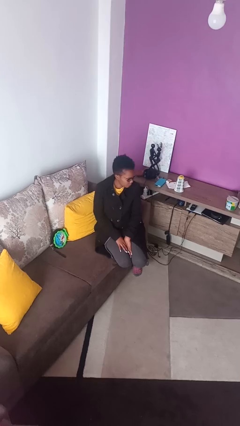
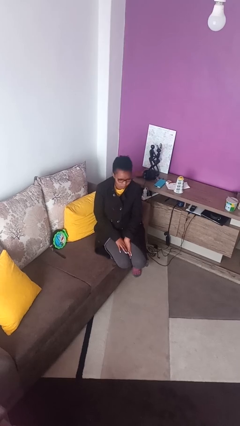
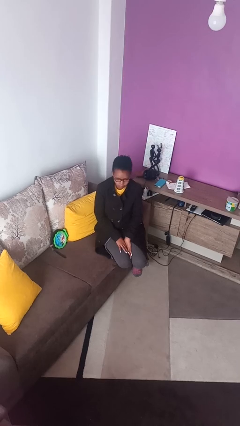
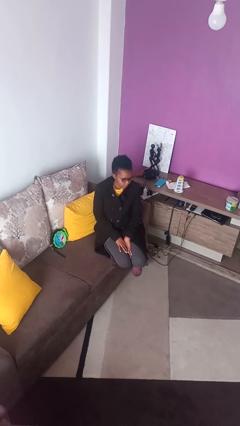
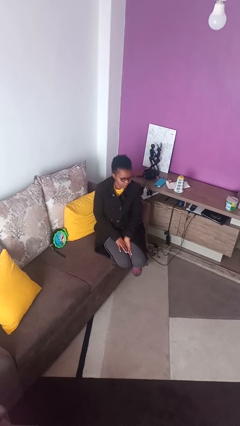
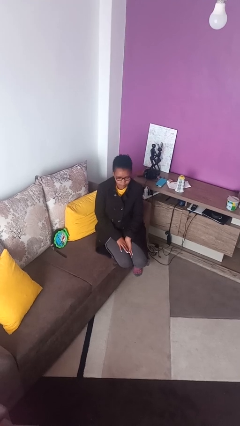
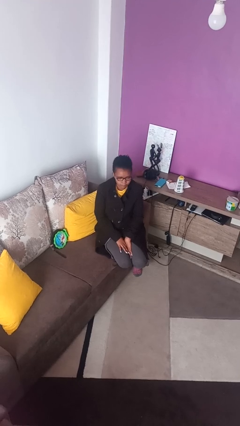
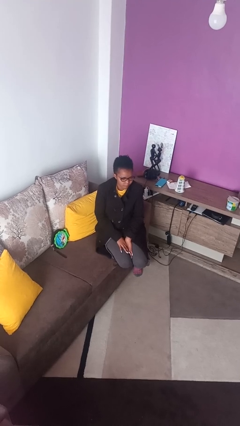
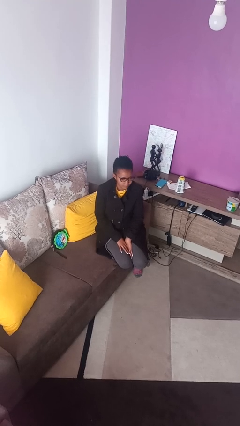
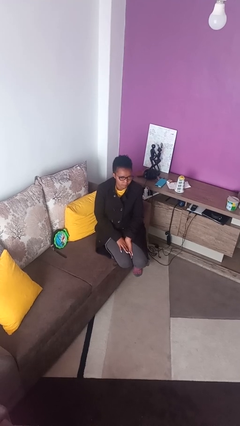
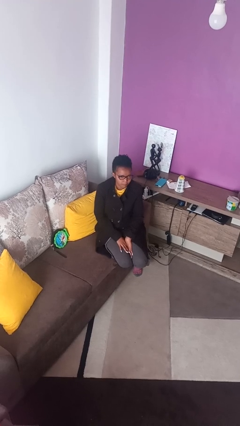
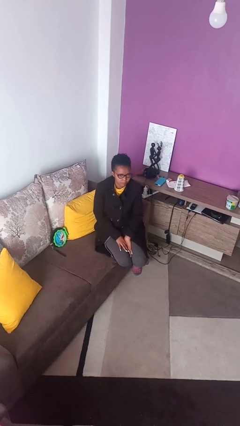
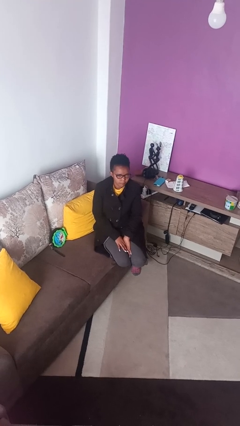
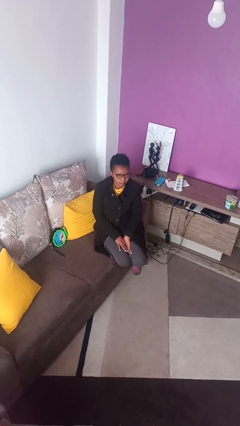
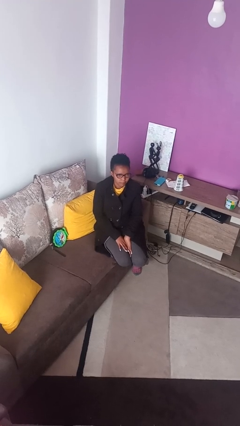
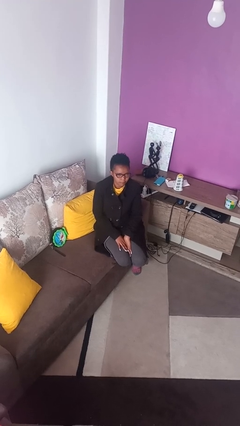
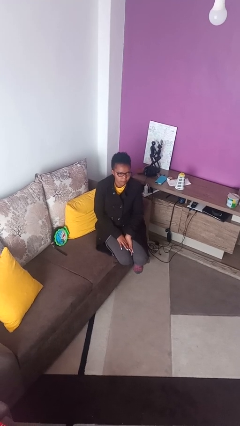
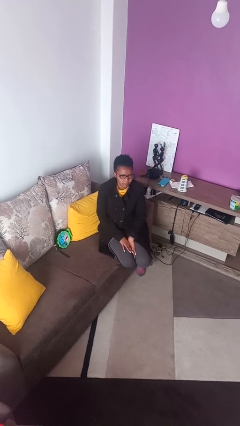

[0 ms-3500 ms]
person shakes head

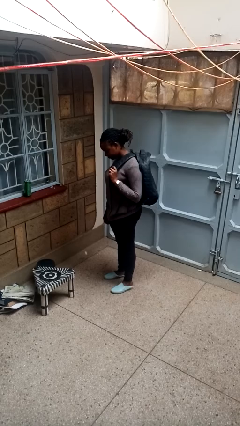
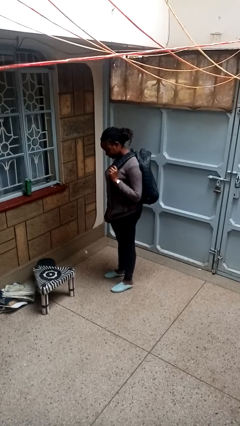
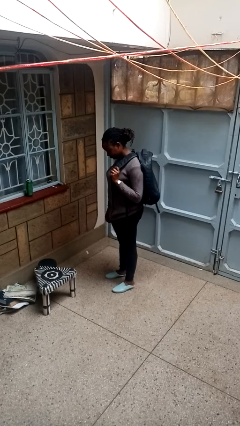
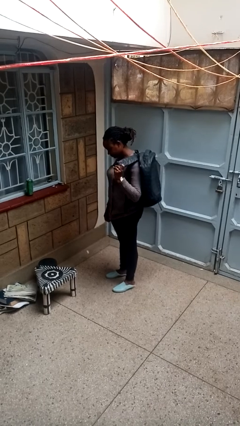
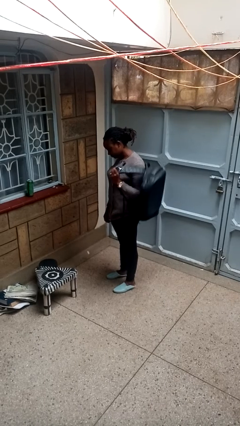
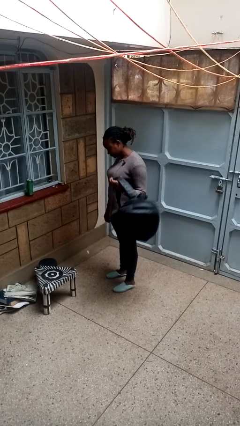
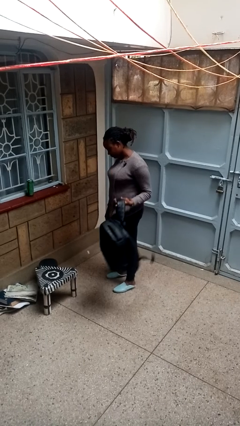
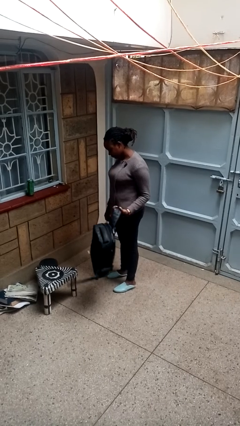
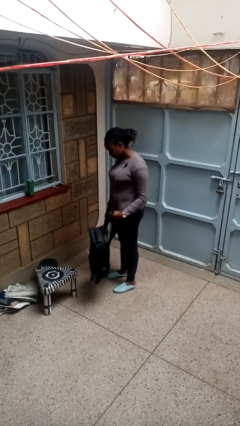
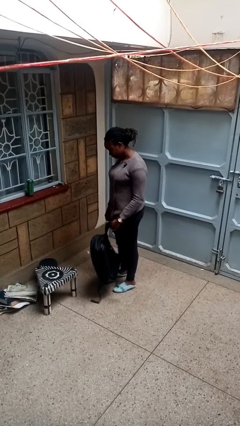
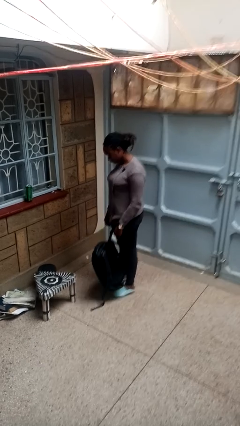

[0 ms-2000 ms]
person takes off backpack

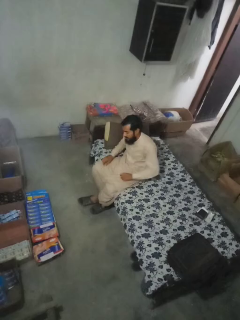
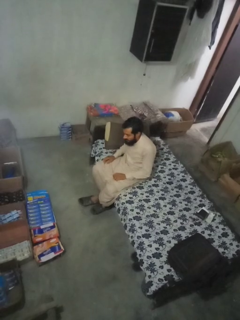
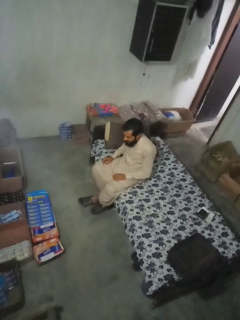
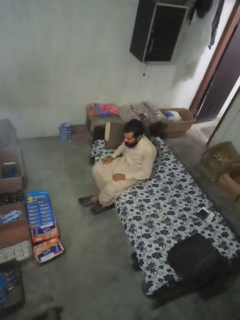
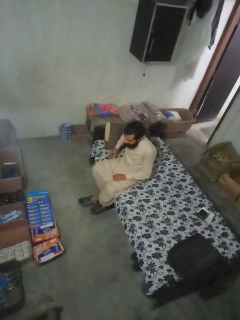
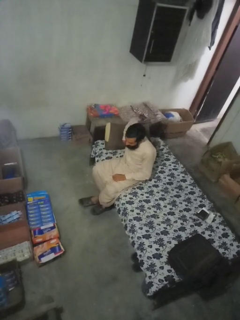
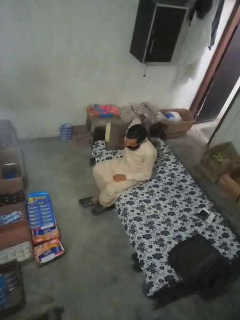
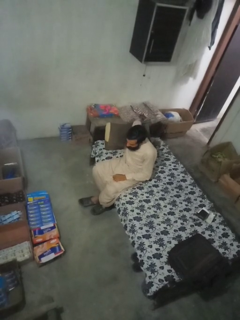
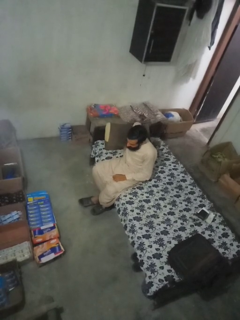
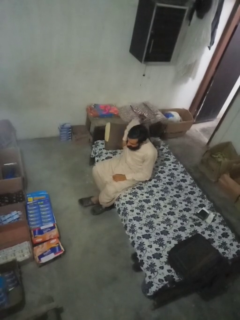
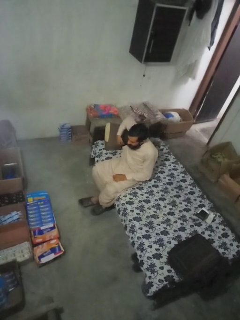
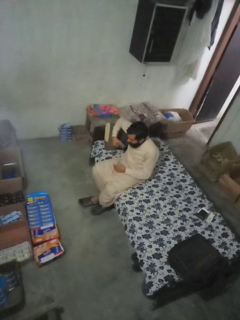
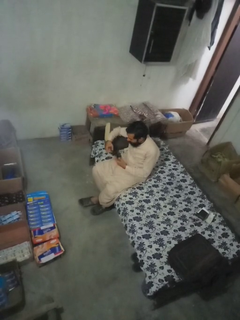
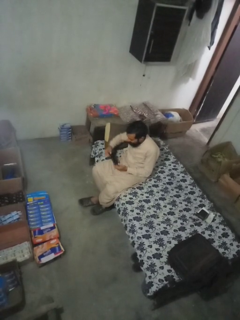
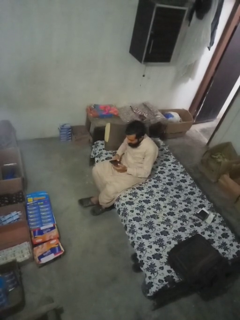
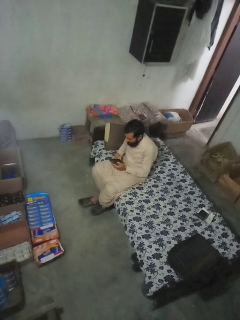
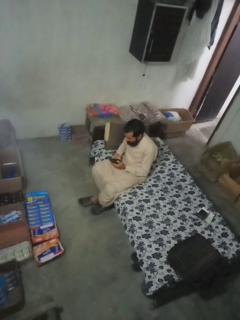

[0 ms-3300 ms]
person takes phone from pocket

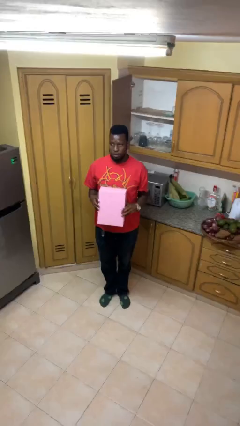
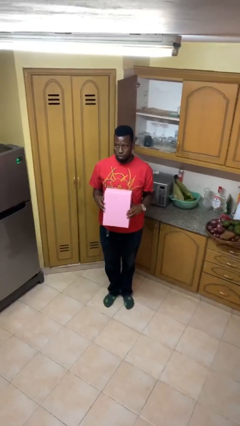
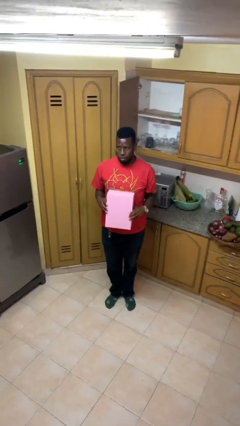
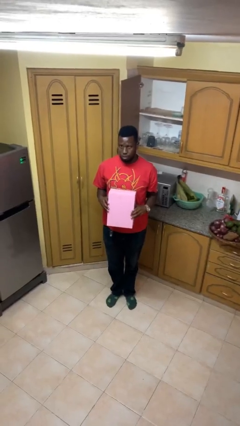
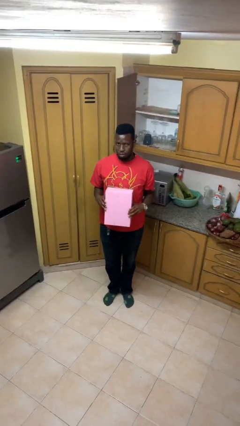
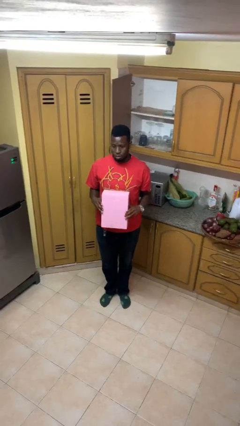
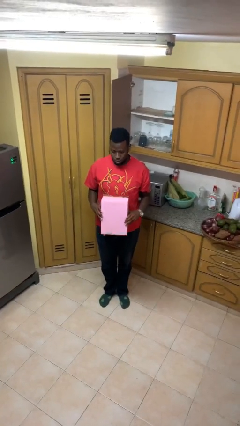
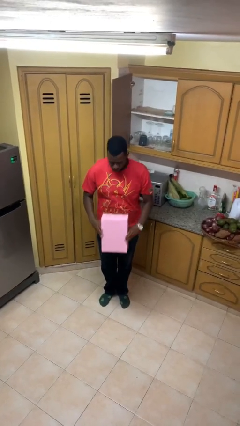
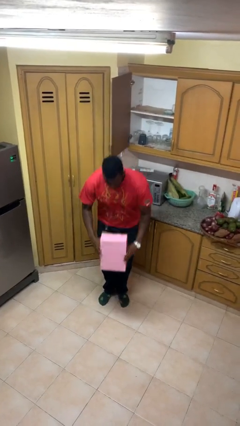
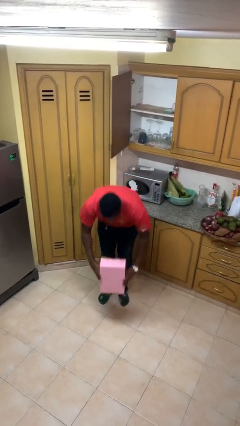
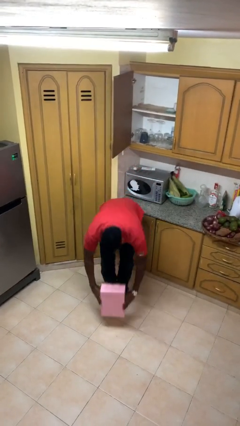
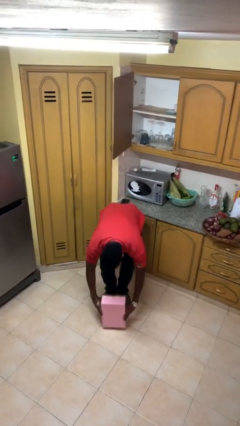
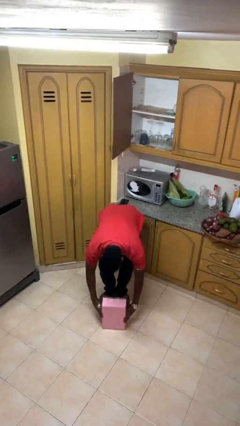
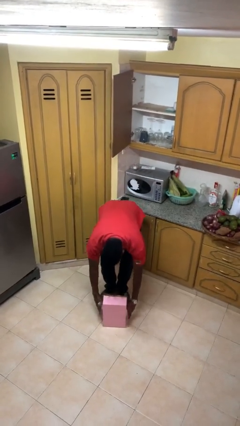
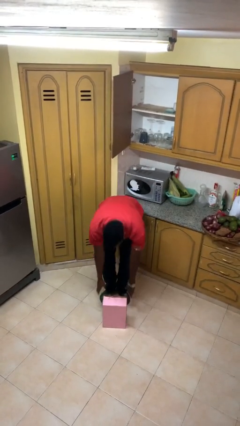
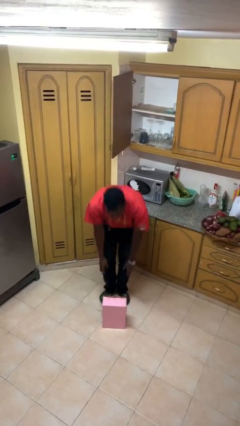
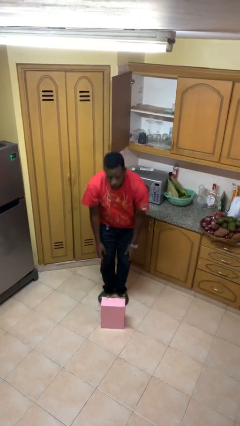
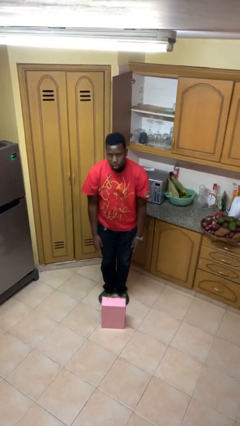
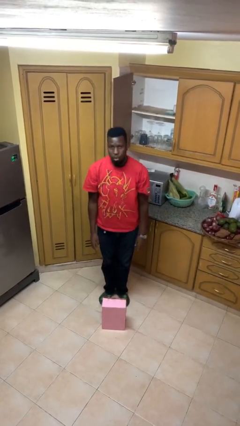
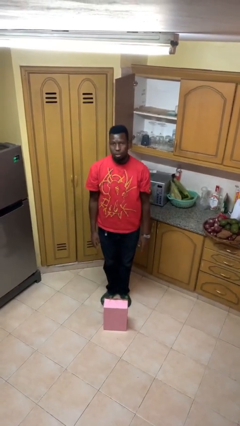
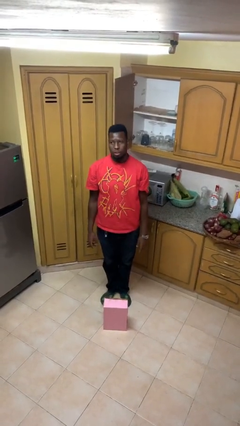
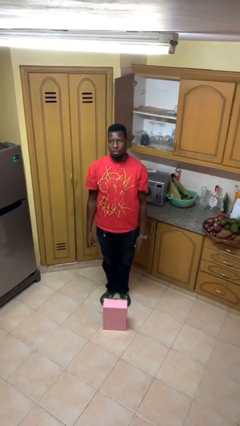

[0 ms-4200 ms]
person puts down object on floor

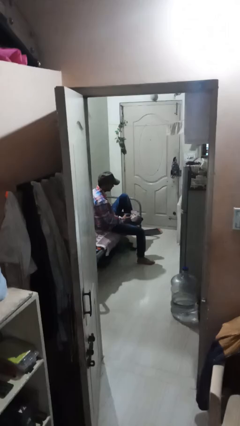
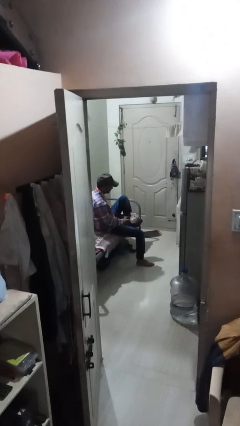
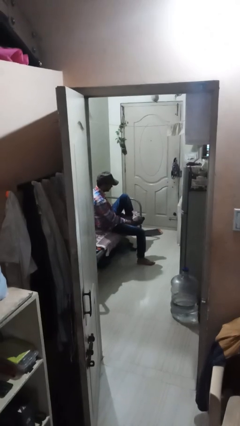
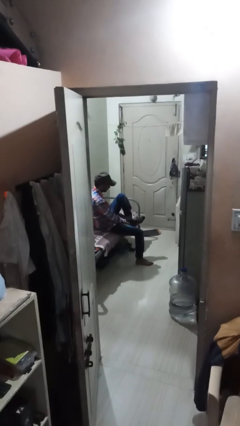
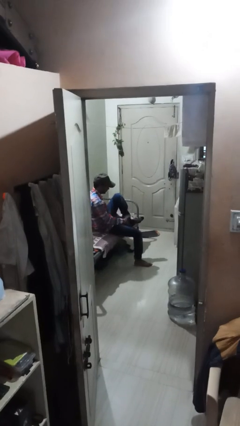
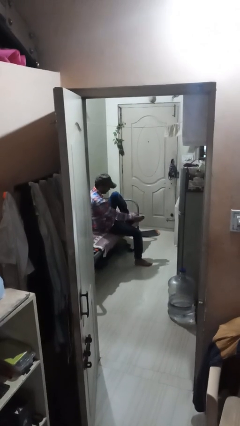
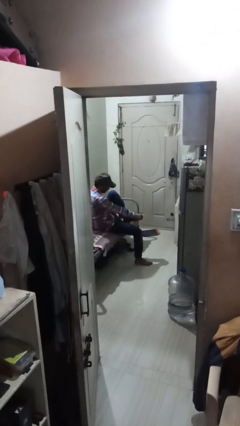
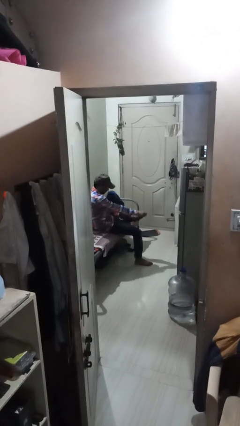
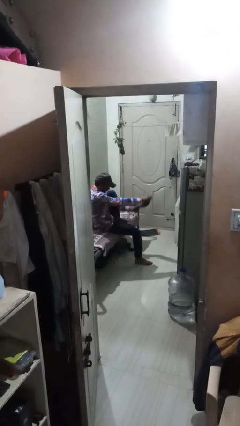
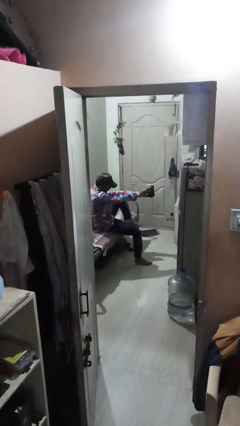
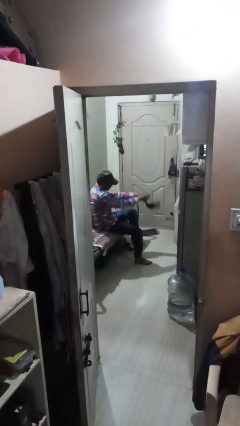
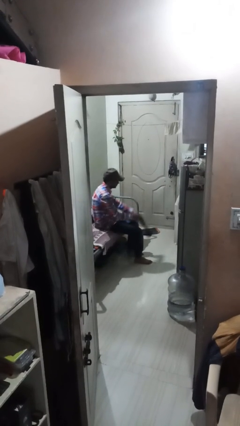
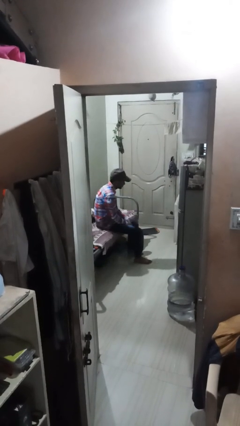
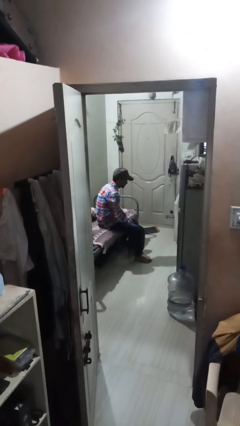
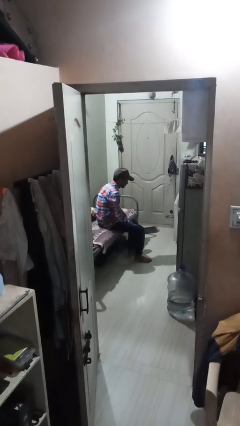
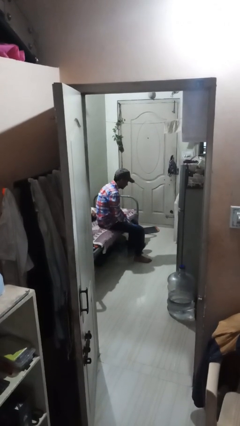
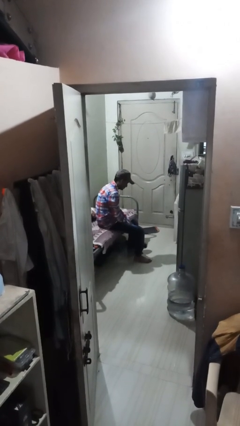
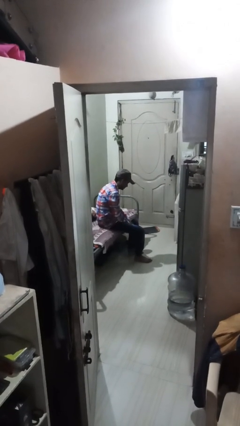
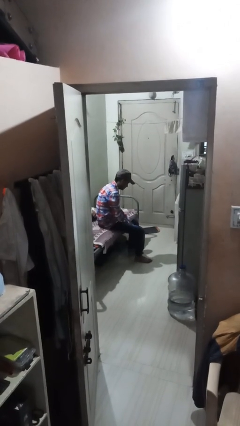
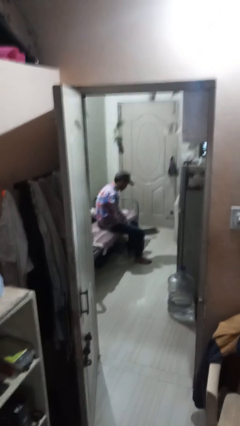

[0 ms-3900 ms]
person takes off socks

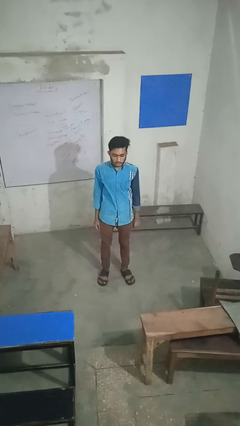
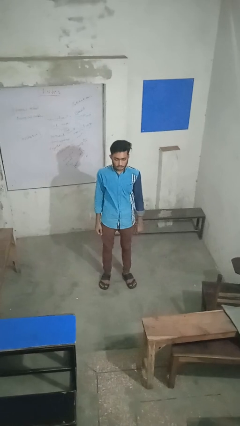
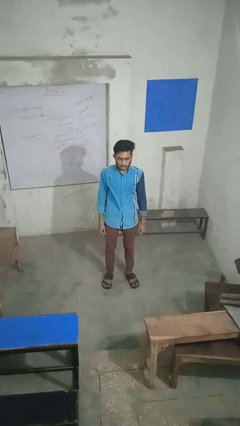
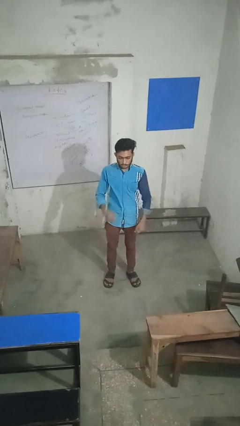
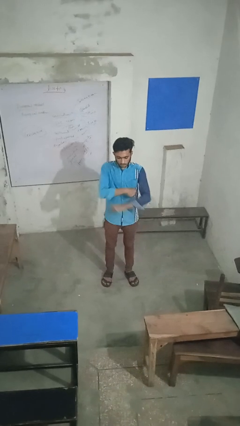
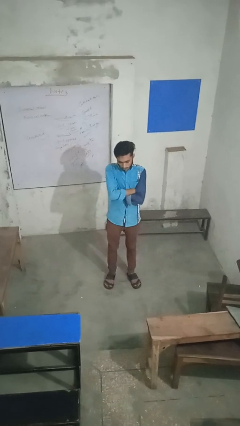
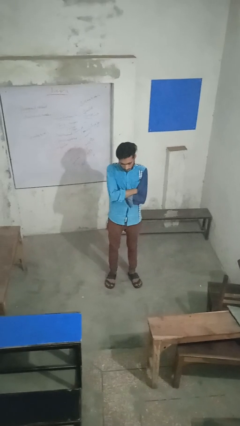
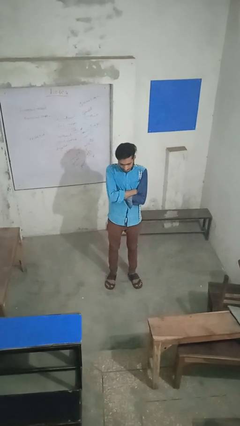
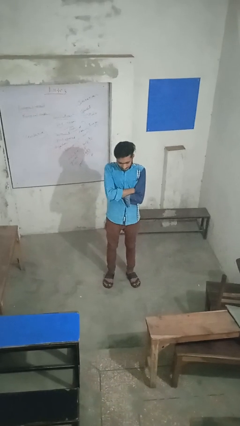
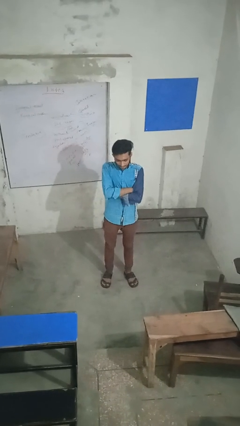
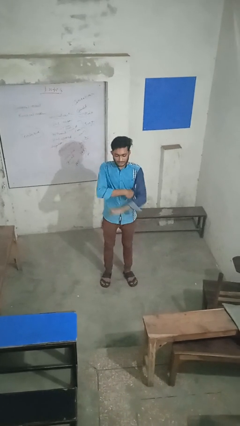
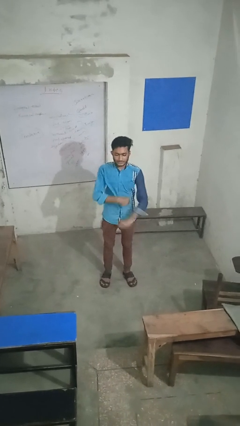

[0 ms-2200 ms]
person crosses arms
